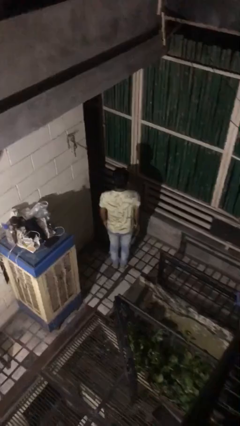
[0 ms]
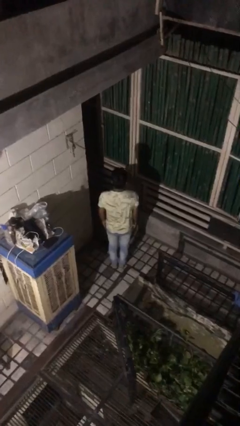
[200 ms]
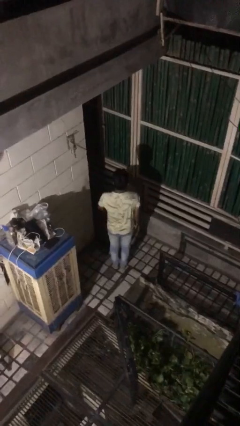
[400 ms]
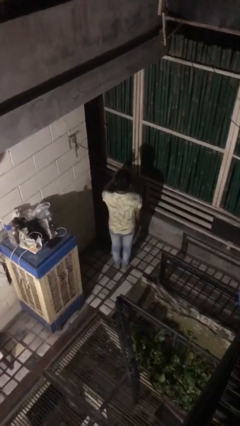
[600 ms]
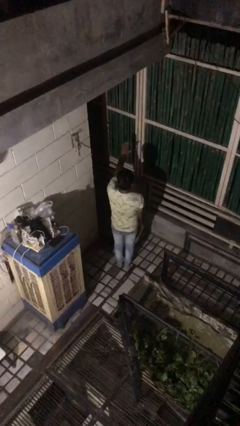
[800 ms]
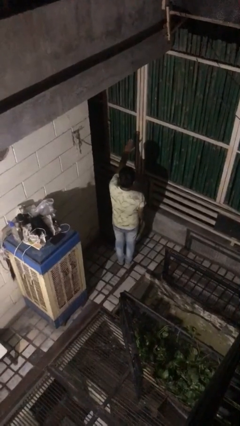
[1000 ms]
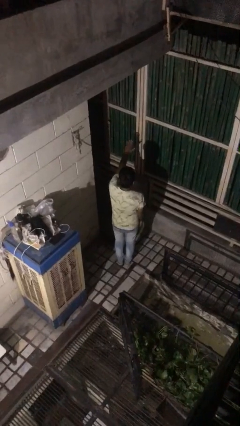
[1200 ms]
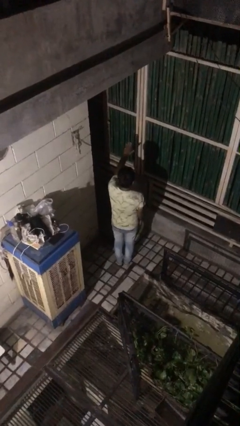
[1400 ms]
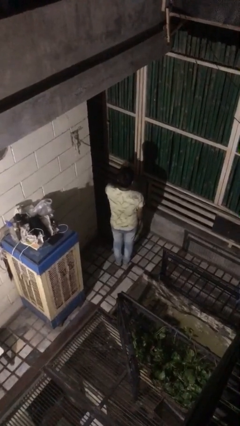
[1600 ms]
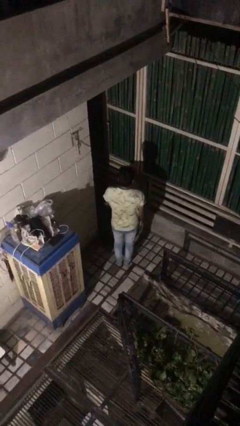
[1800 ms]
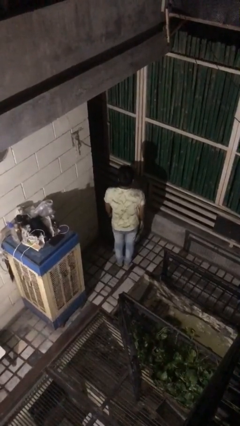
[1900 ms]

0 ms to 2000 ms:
person gestures stop

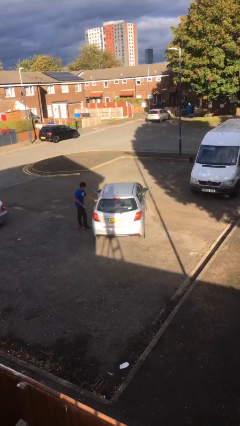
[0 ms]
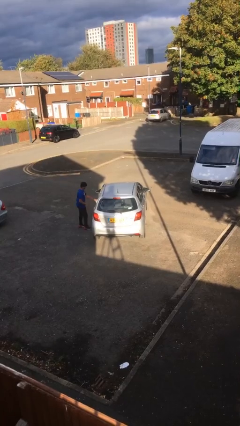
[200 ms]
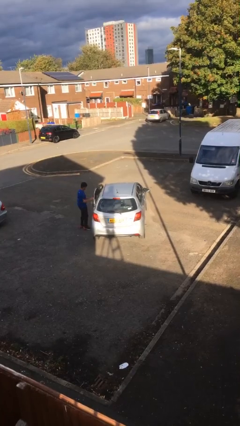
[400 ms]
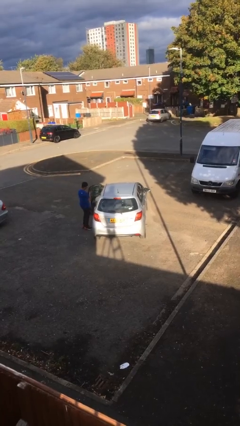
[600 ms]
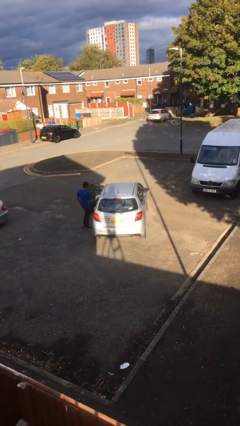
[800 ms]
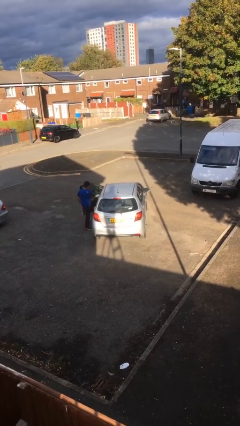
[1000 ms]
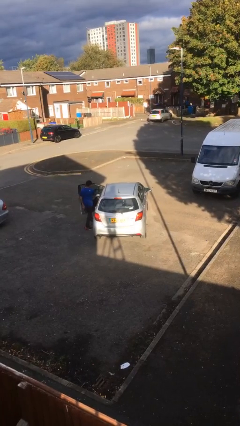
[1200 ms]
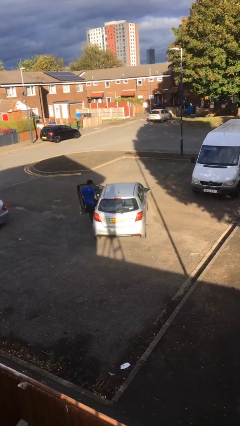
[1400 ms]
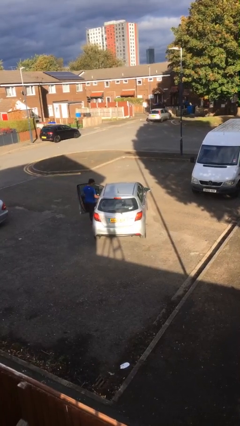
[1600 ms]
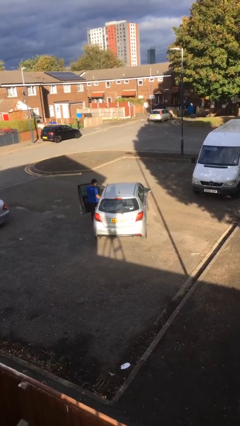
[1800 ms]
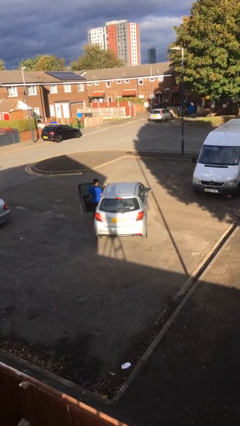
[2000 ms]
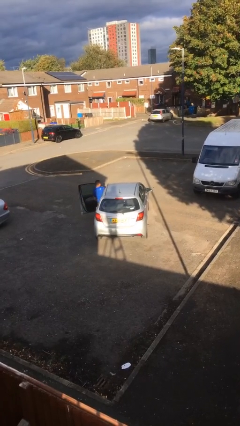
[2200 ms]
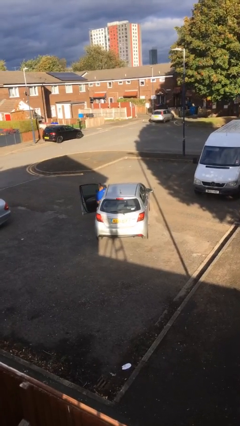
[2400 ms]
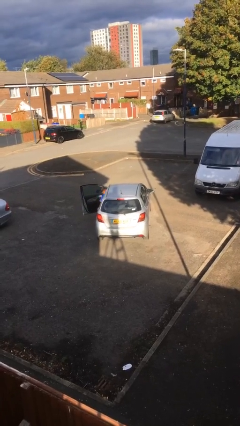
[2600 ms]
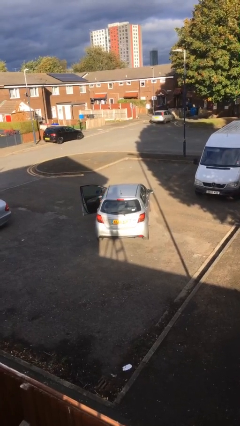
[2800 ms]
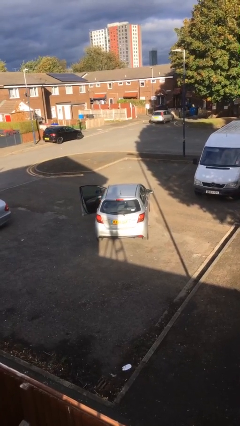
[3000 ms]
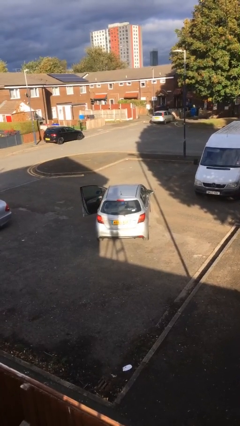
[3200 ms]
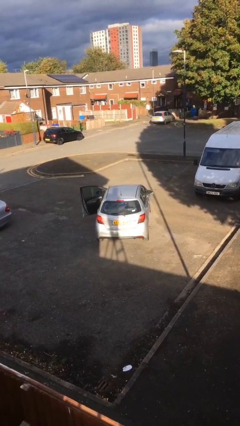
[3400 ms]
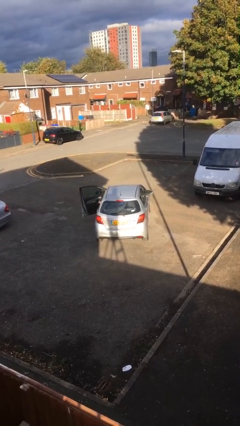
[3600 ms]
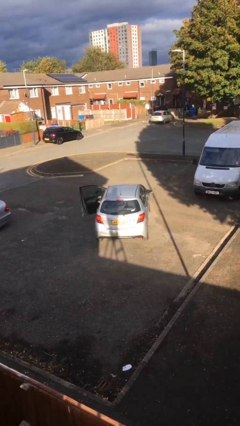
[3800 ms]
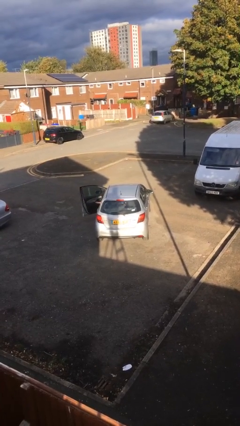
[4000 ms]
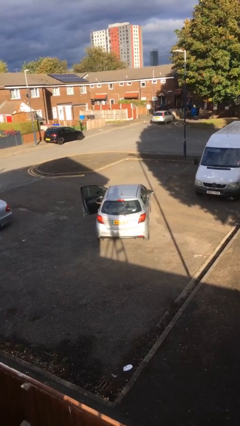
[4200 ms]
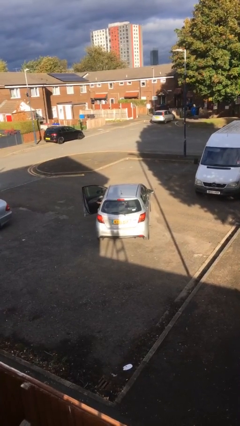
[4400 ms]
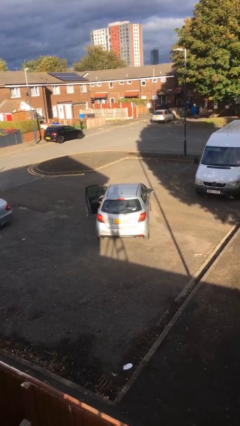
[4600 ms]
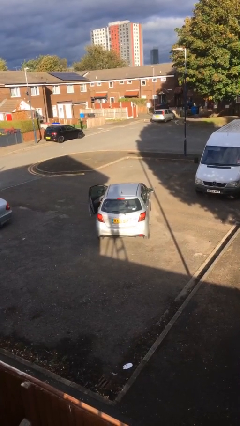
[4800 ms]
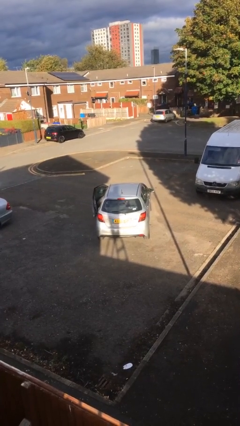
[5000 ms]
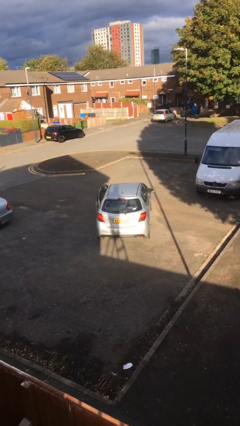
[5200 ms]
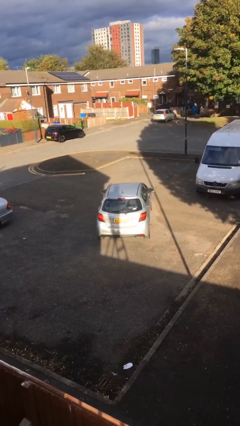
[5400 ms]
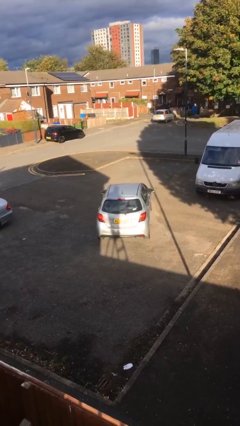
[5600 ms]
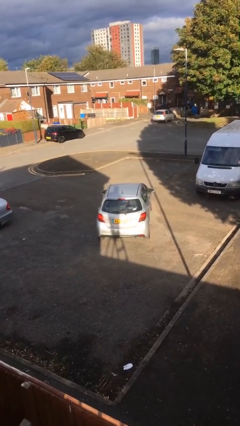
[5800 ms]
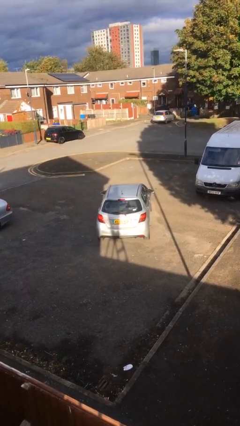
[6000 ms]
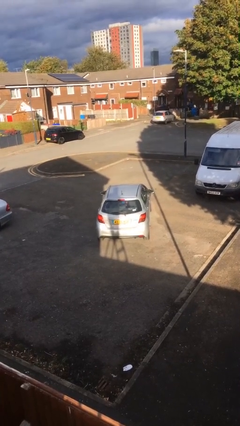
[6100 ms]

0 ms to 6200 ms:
car picks up person

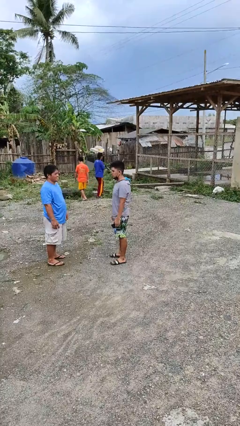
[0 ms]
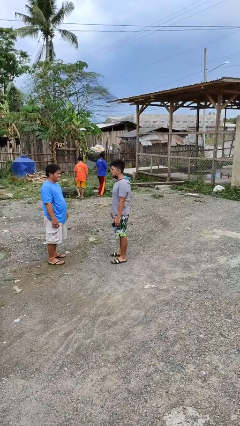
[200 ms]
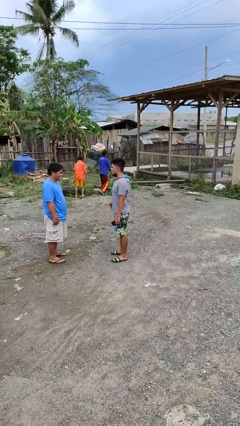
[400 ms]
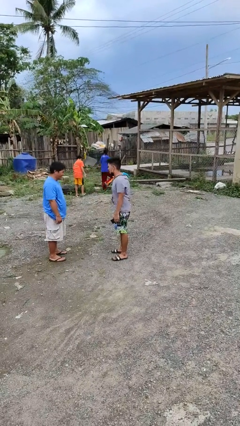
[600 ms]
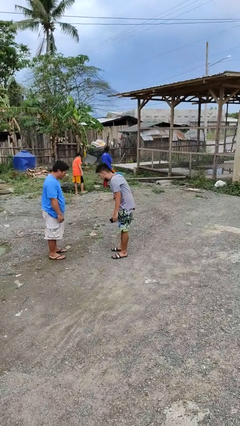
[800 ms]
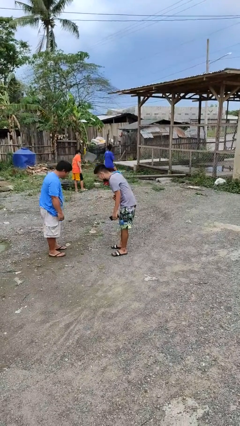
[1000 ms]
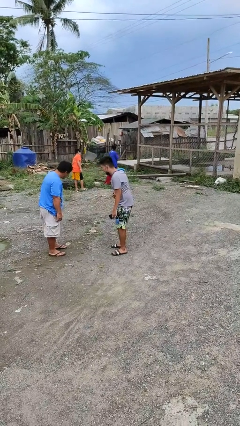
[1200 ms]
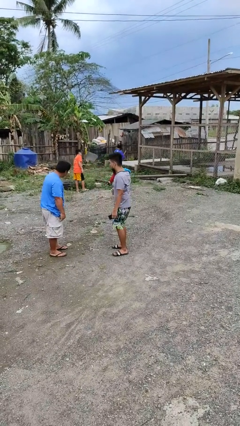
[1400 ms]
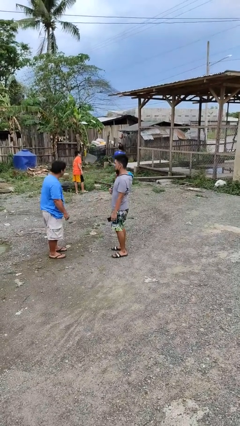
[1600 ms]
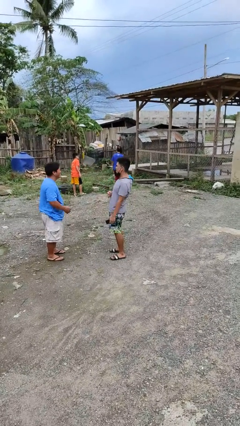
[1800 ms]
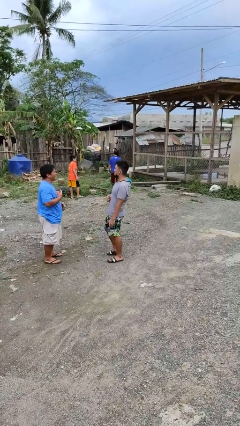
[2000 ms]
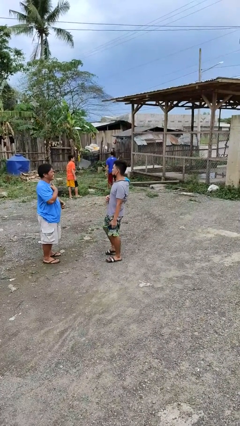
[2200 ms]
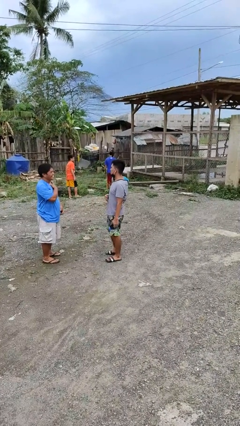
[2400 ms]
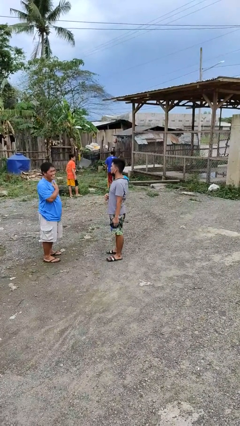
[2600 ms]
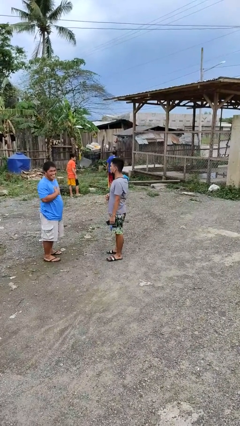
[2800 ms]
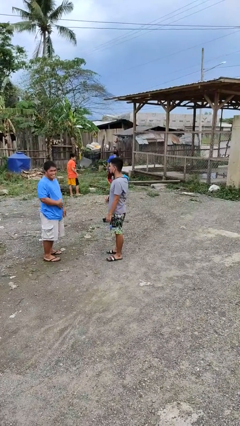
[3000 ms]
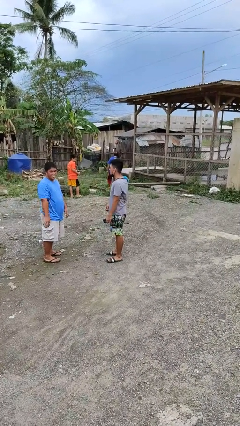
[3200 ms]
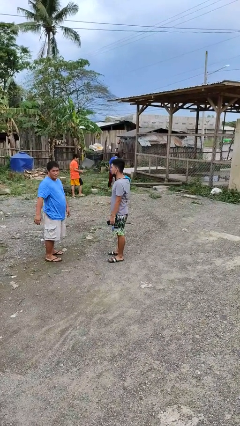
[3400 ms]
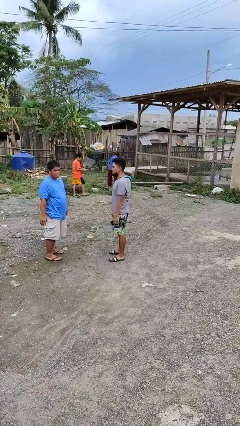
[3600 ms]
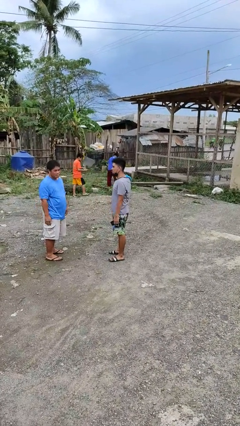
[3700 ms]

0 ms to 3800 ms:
person laughs with person

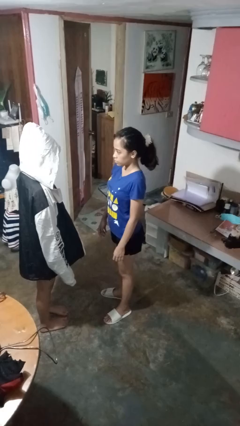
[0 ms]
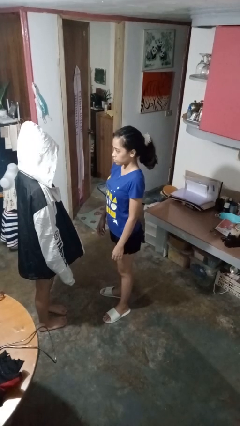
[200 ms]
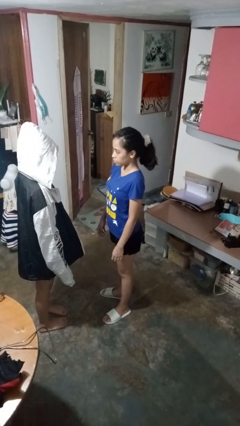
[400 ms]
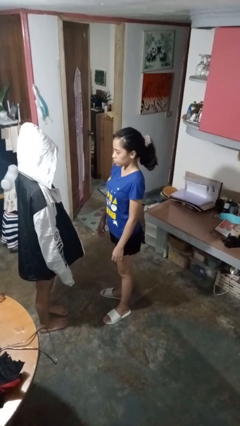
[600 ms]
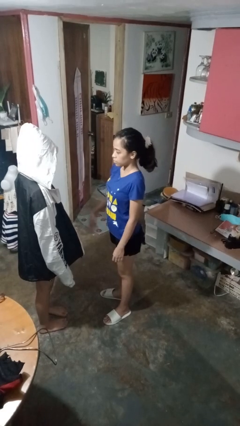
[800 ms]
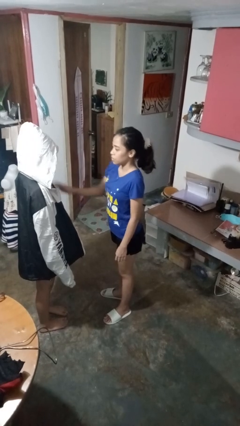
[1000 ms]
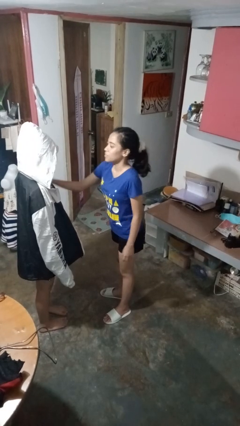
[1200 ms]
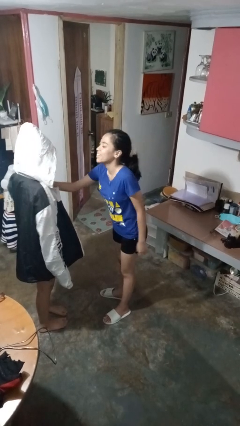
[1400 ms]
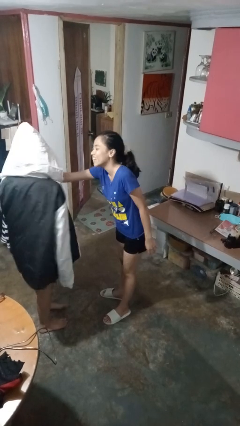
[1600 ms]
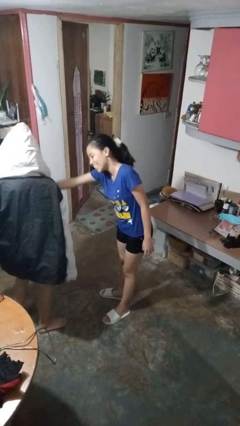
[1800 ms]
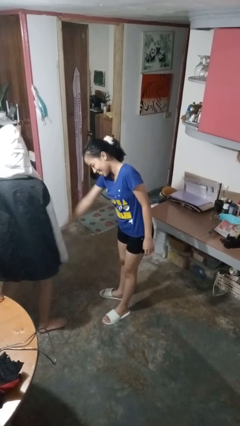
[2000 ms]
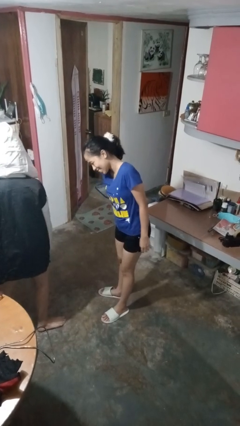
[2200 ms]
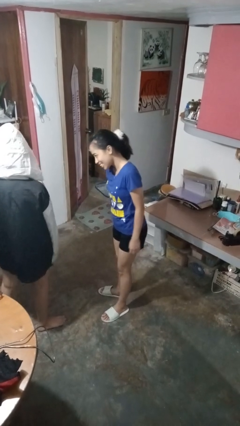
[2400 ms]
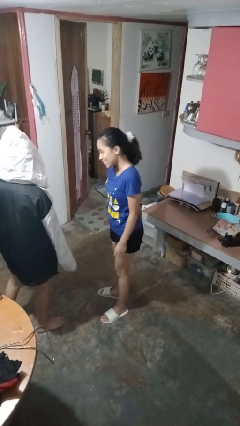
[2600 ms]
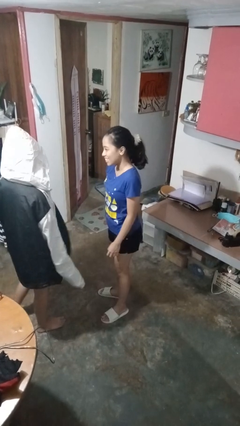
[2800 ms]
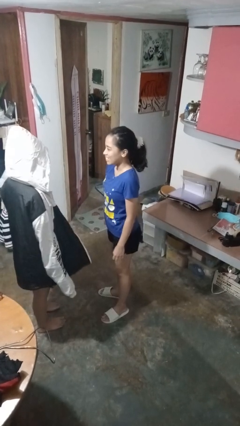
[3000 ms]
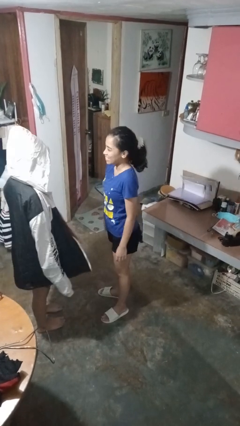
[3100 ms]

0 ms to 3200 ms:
person shoves person

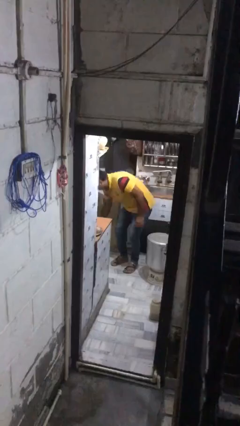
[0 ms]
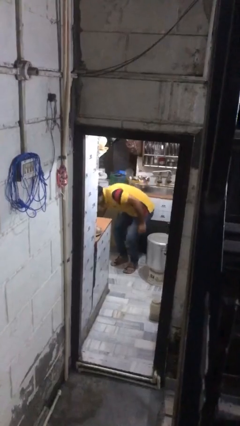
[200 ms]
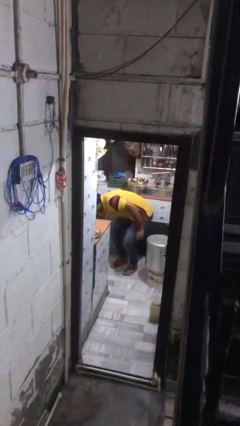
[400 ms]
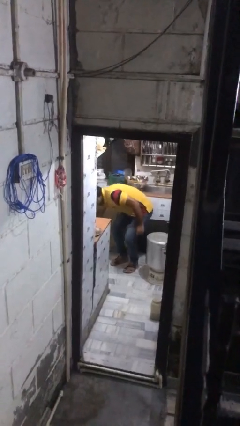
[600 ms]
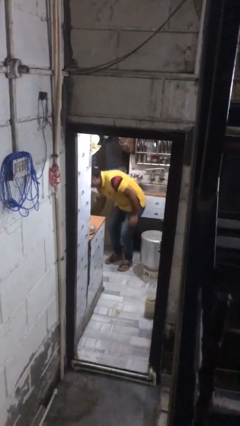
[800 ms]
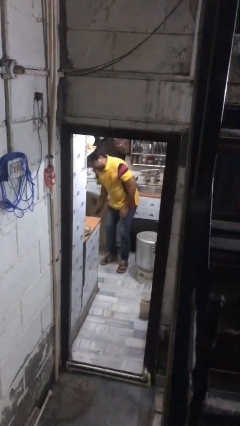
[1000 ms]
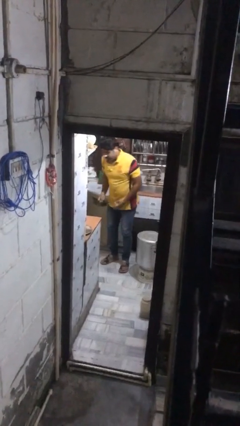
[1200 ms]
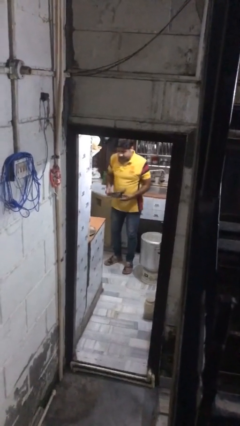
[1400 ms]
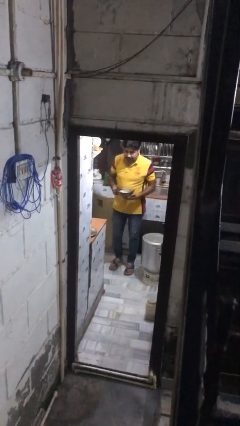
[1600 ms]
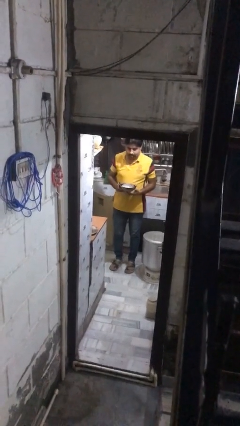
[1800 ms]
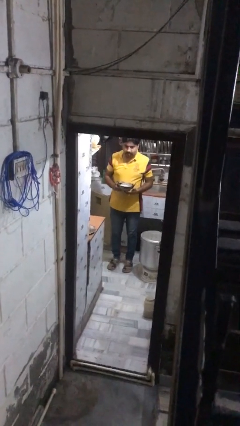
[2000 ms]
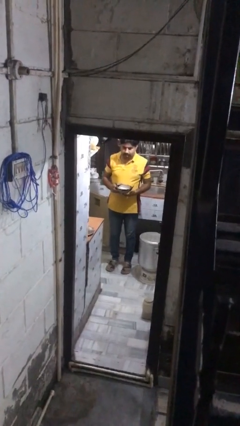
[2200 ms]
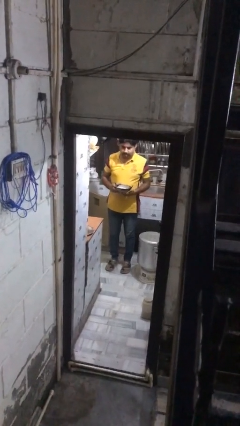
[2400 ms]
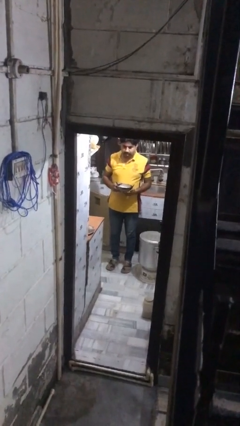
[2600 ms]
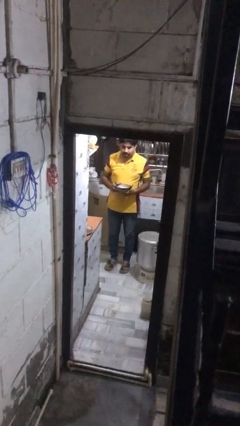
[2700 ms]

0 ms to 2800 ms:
person takes object from kitchen drawer
